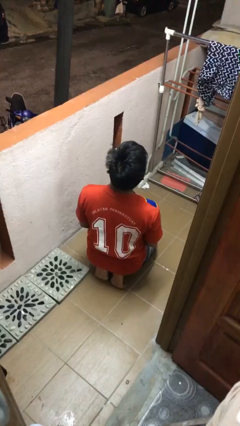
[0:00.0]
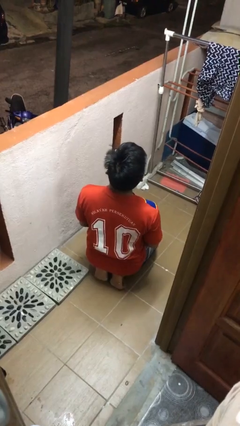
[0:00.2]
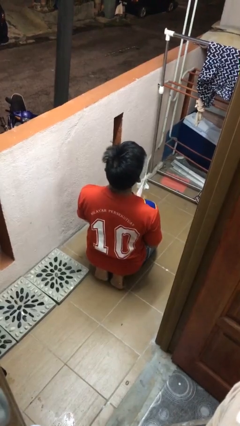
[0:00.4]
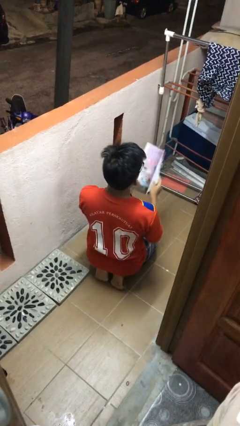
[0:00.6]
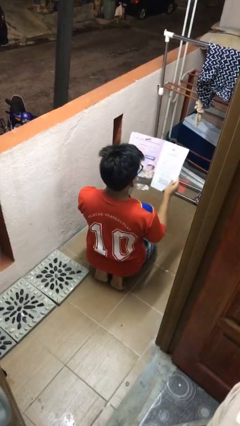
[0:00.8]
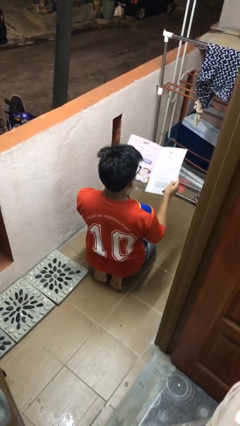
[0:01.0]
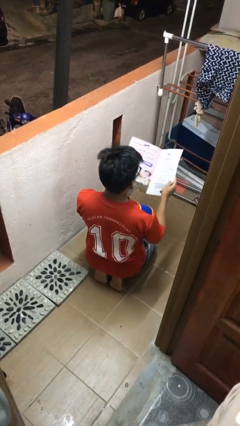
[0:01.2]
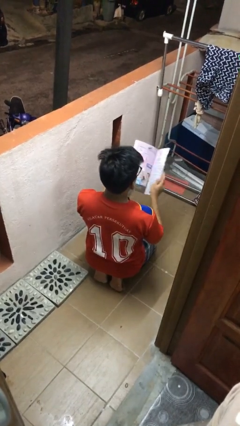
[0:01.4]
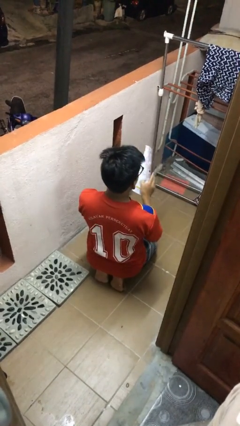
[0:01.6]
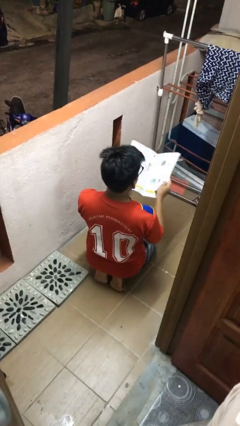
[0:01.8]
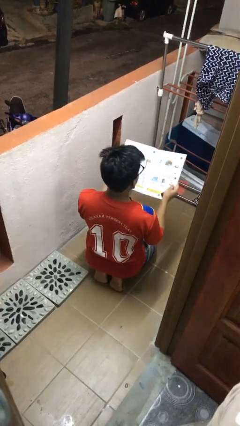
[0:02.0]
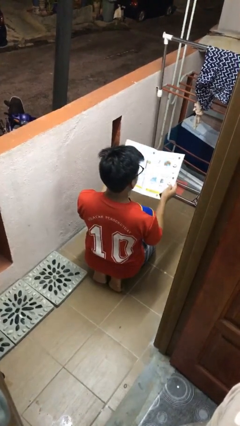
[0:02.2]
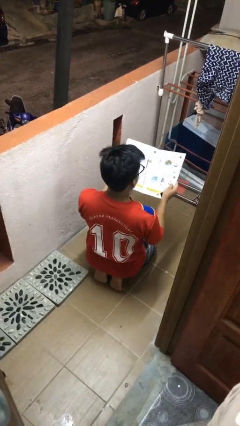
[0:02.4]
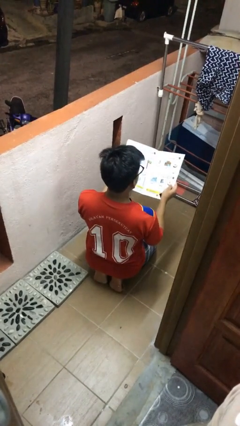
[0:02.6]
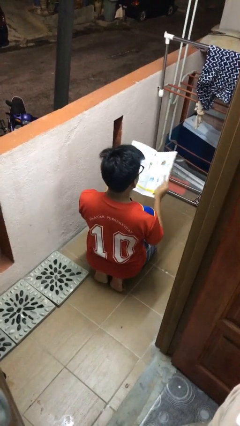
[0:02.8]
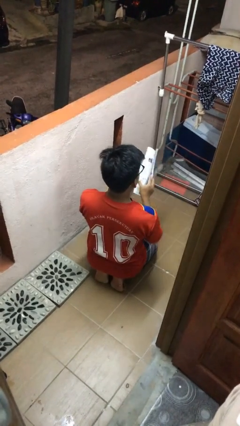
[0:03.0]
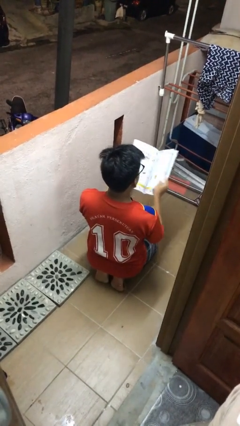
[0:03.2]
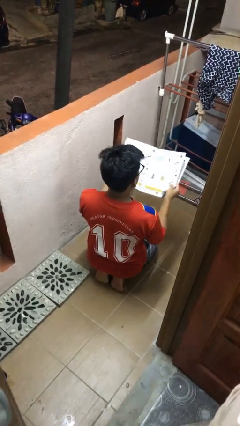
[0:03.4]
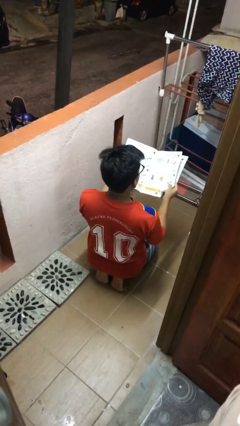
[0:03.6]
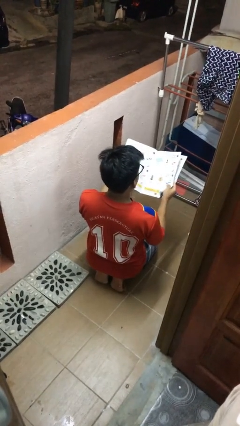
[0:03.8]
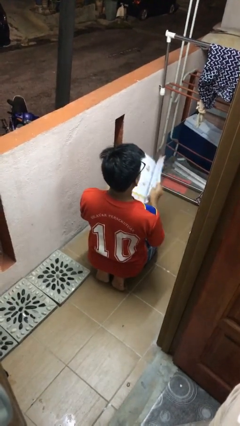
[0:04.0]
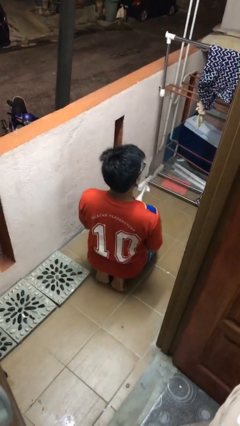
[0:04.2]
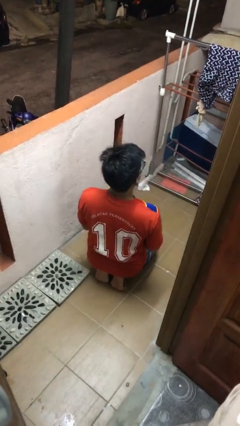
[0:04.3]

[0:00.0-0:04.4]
person reads magazine

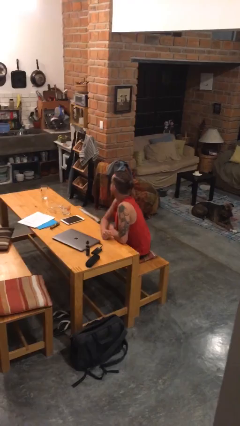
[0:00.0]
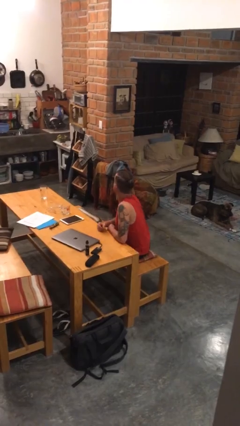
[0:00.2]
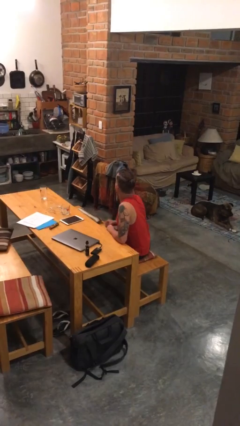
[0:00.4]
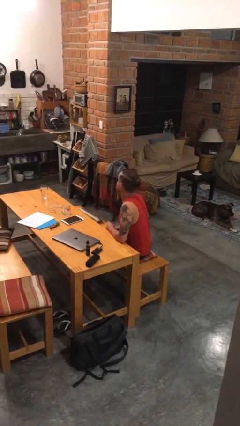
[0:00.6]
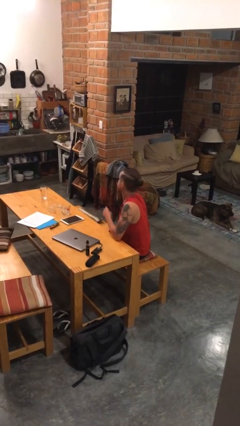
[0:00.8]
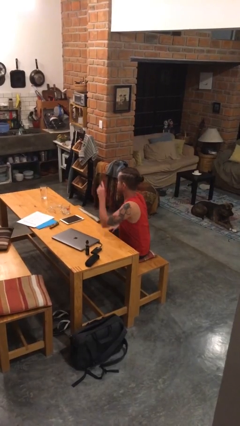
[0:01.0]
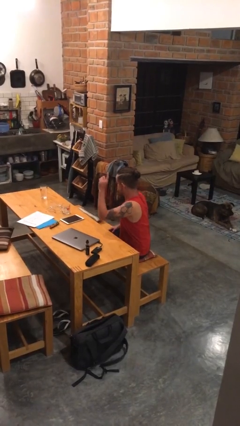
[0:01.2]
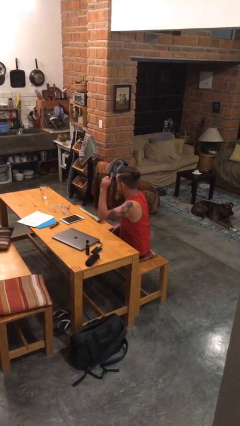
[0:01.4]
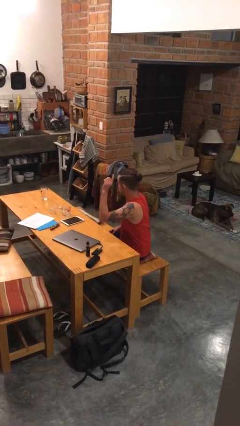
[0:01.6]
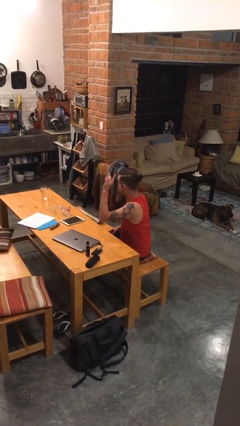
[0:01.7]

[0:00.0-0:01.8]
person gestures raise hand

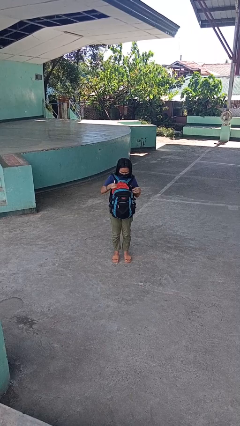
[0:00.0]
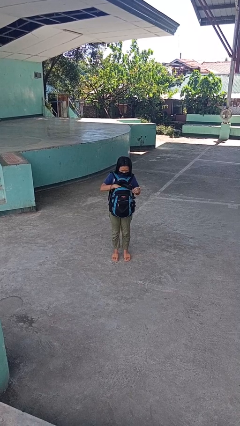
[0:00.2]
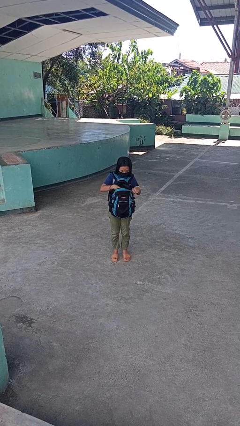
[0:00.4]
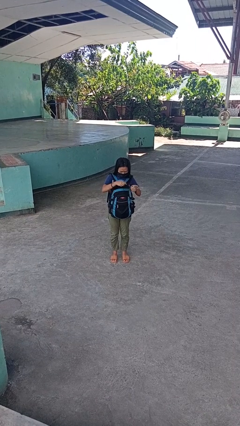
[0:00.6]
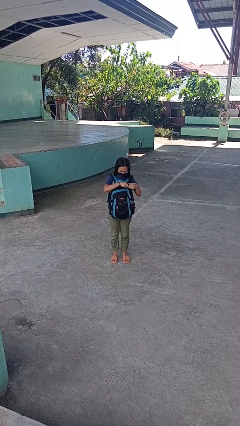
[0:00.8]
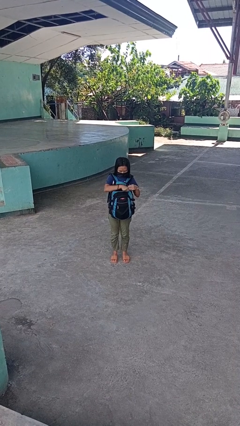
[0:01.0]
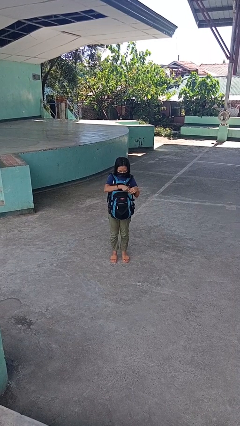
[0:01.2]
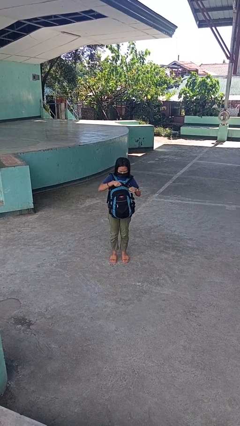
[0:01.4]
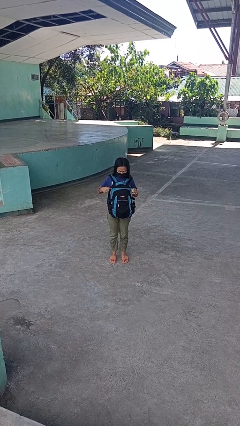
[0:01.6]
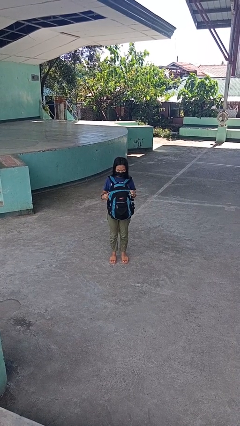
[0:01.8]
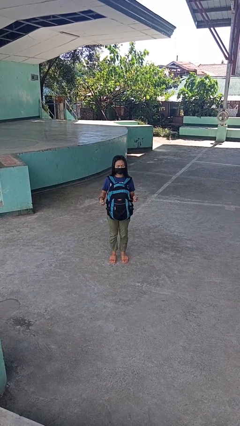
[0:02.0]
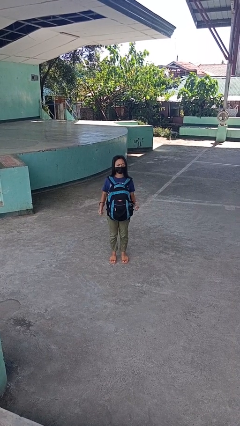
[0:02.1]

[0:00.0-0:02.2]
person puts object into backpack

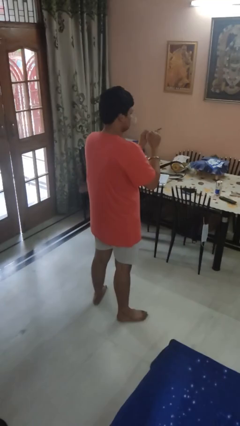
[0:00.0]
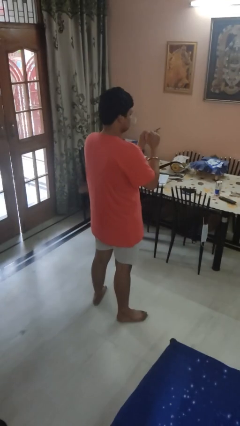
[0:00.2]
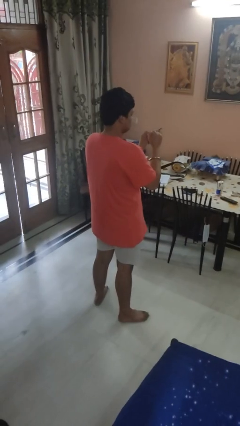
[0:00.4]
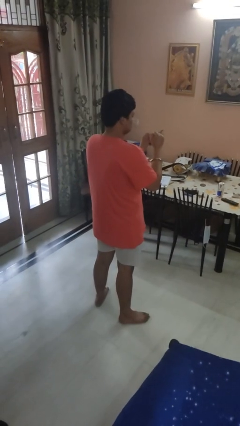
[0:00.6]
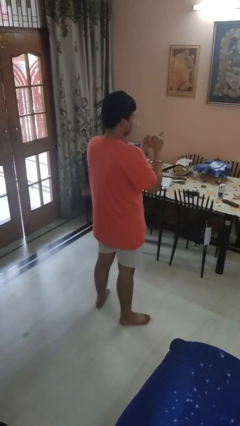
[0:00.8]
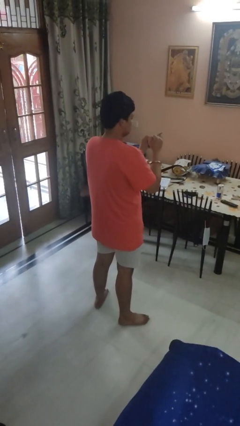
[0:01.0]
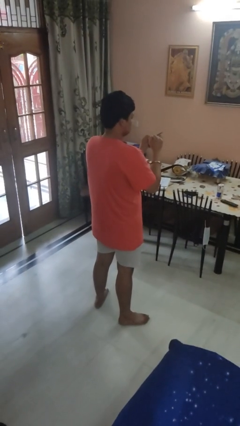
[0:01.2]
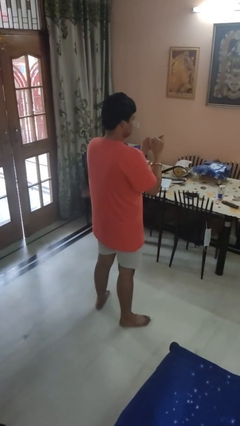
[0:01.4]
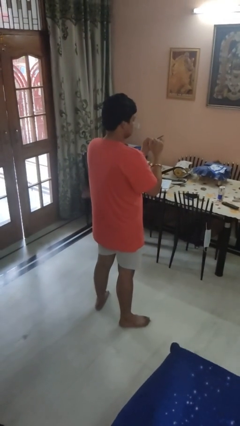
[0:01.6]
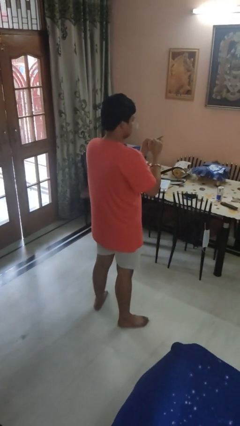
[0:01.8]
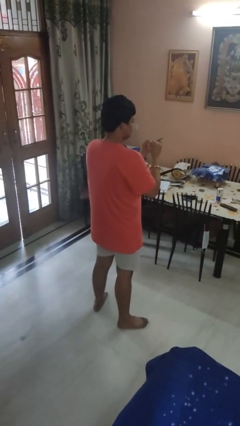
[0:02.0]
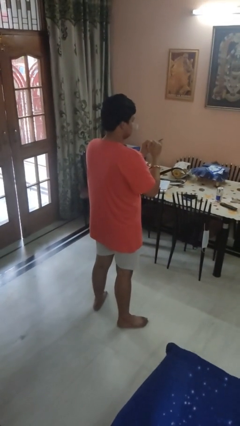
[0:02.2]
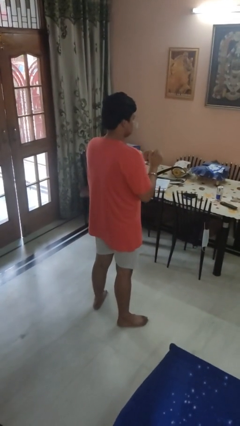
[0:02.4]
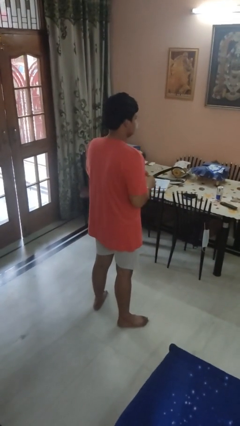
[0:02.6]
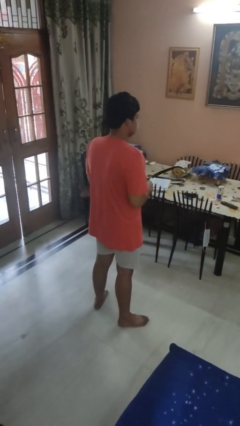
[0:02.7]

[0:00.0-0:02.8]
person files fingernails

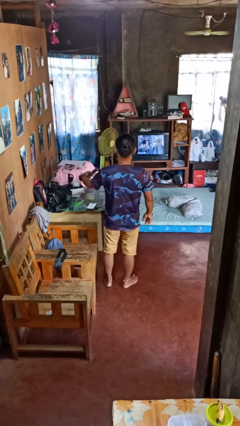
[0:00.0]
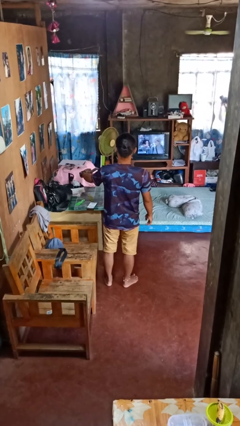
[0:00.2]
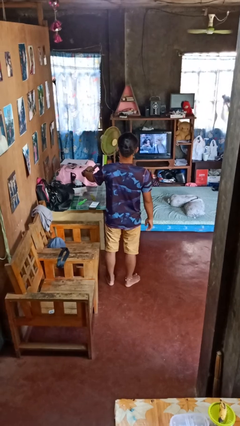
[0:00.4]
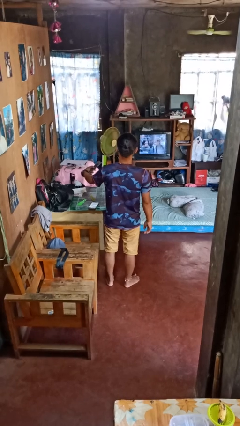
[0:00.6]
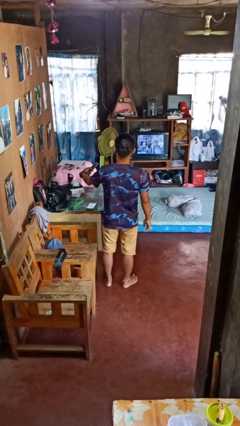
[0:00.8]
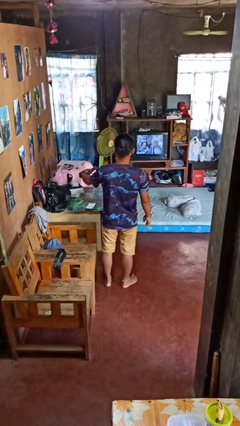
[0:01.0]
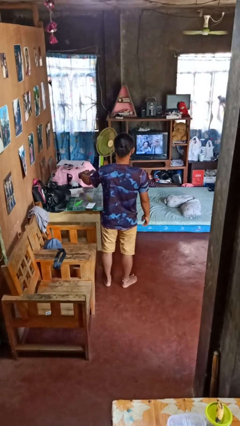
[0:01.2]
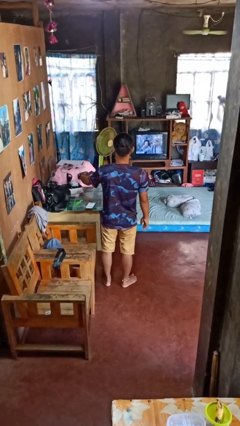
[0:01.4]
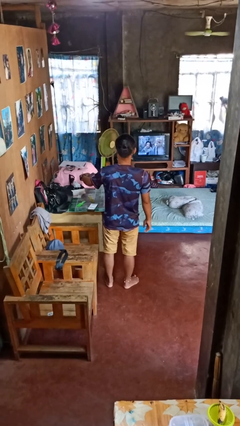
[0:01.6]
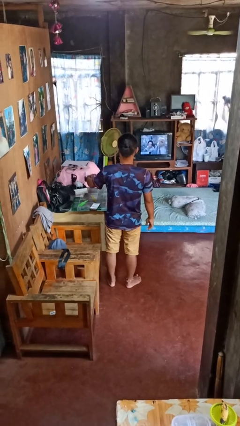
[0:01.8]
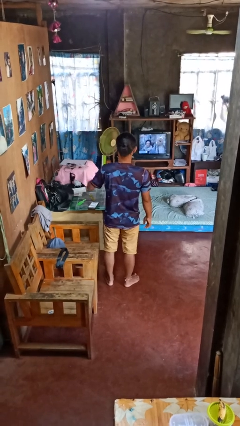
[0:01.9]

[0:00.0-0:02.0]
person uses television remote

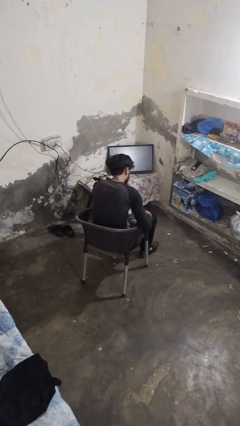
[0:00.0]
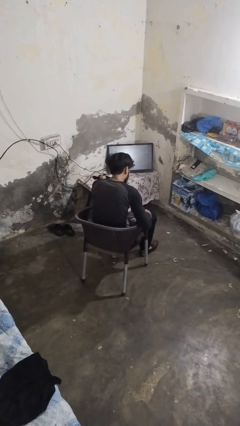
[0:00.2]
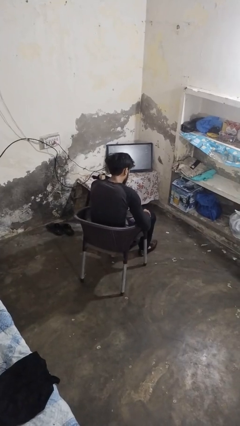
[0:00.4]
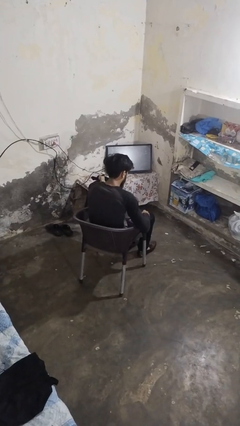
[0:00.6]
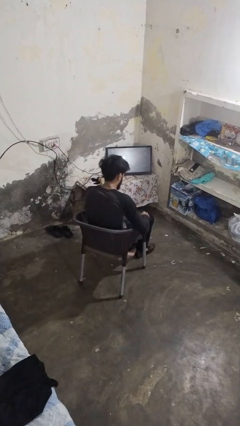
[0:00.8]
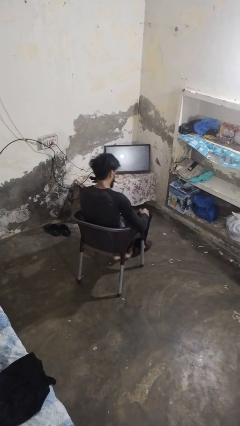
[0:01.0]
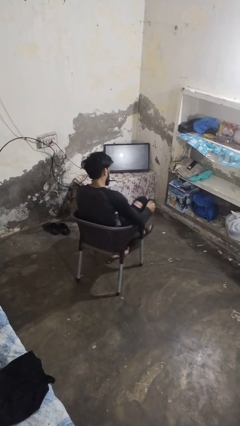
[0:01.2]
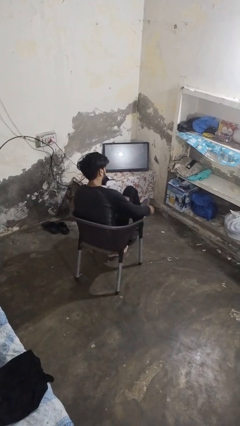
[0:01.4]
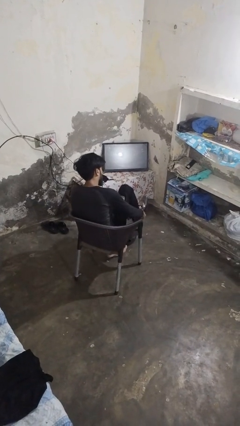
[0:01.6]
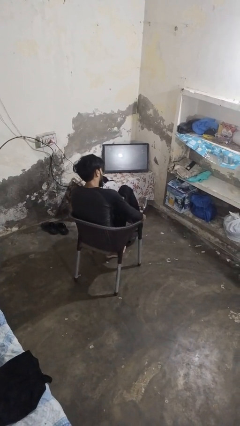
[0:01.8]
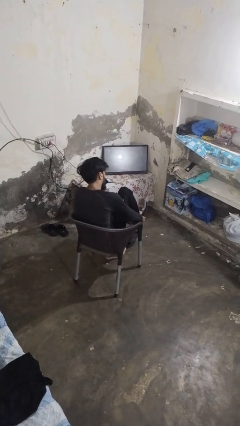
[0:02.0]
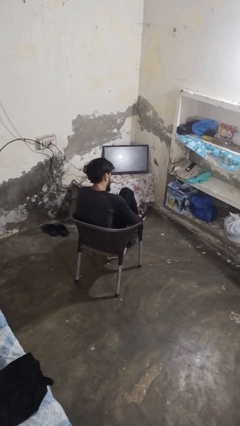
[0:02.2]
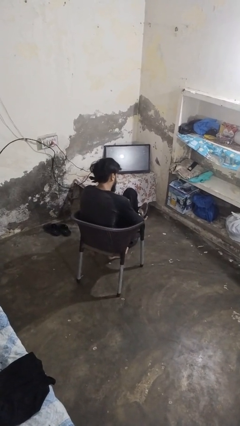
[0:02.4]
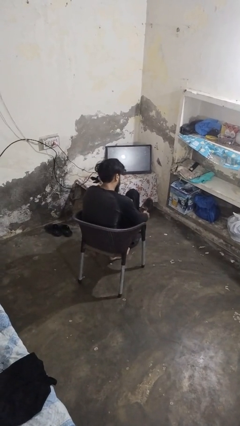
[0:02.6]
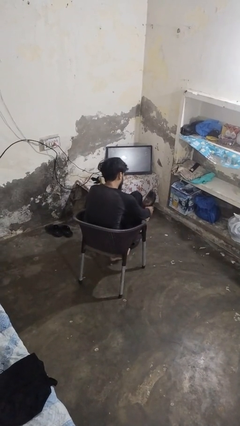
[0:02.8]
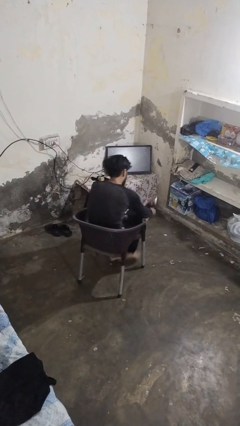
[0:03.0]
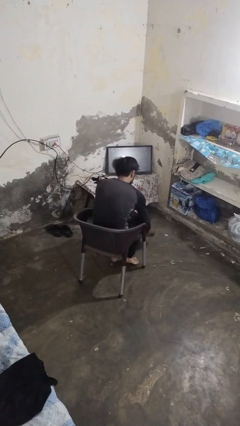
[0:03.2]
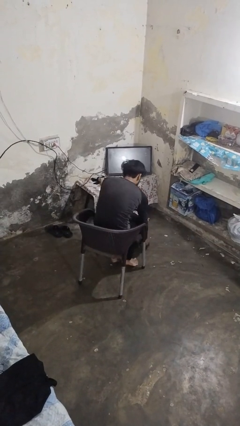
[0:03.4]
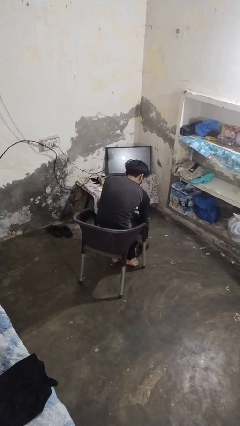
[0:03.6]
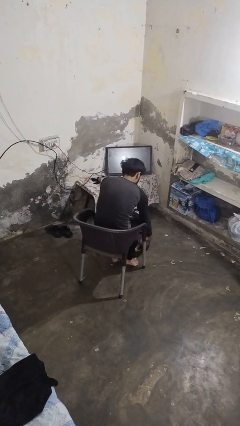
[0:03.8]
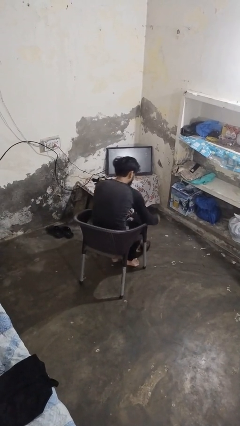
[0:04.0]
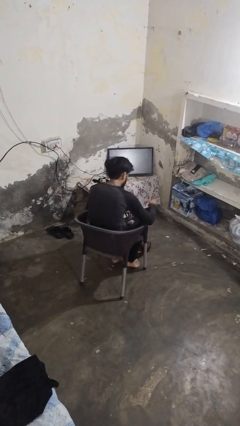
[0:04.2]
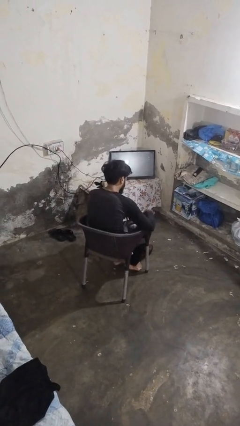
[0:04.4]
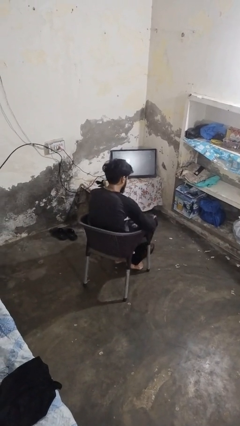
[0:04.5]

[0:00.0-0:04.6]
person takes off shoes
